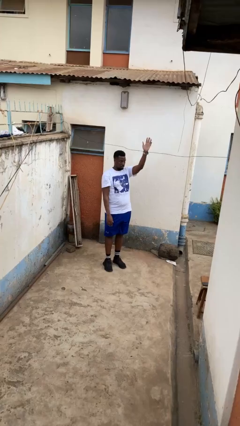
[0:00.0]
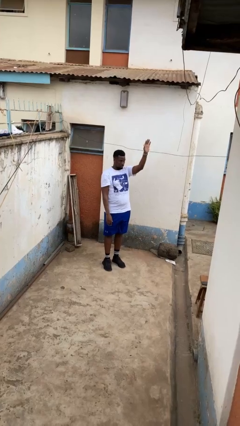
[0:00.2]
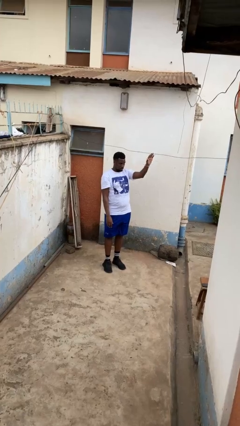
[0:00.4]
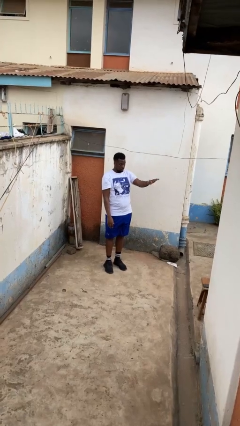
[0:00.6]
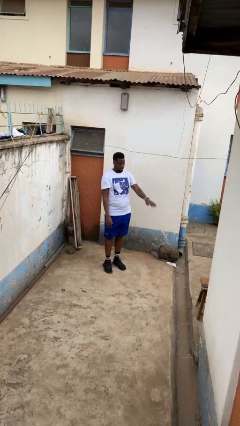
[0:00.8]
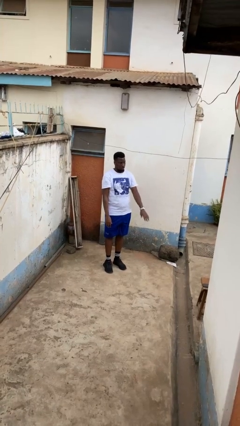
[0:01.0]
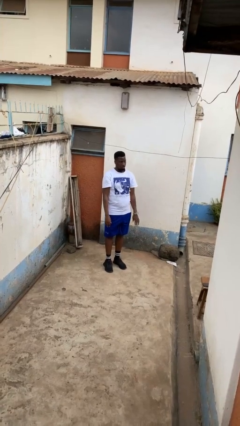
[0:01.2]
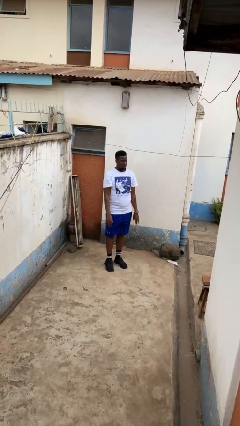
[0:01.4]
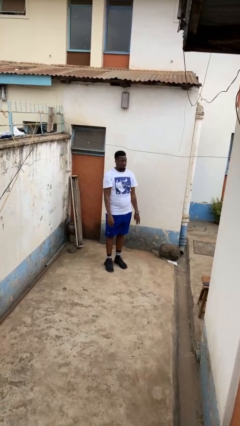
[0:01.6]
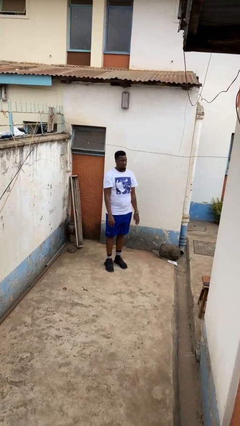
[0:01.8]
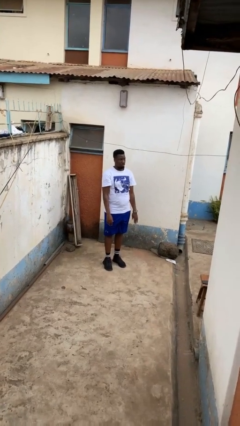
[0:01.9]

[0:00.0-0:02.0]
person gestures swipe down

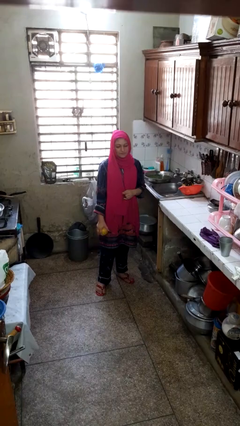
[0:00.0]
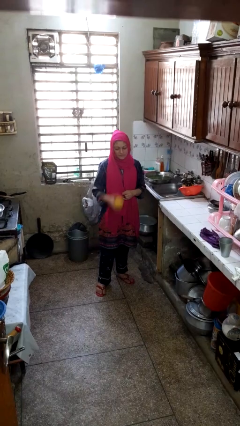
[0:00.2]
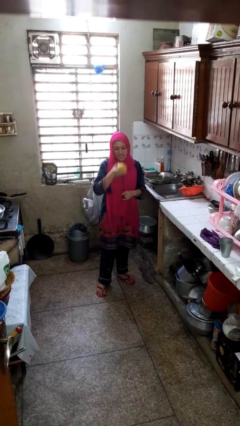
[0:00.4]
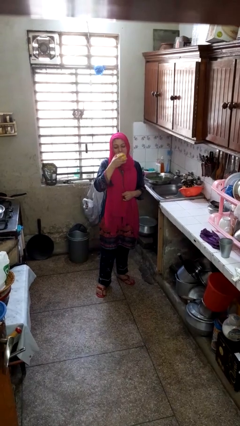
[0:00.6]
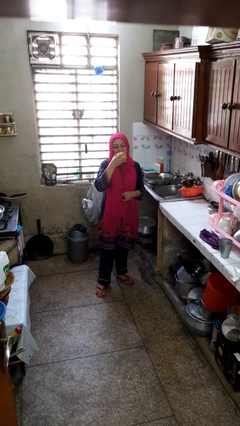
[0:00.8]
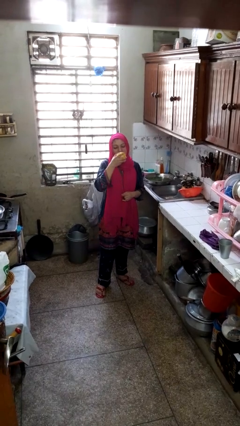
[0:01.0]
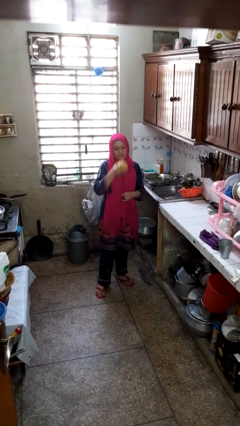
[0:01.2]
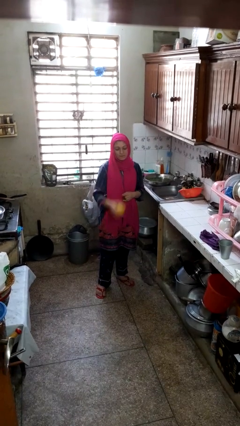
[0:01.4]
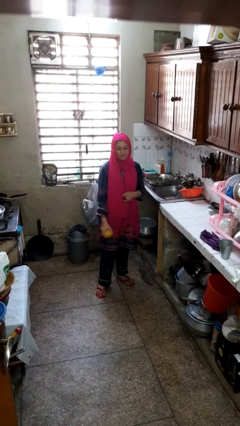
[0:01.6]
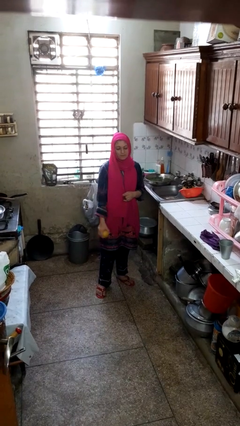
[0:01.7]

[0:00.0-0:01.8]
person eats apple

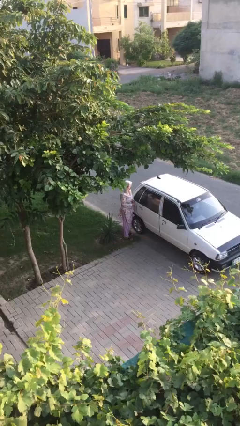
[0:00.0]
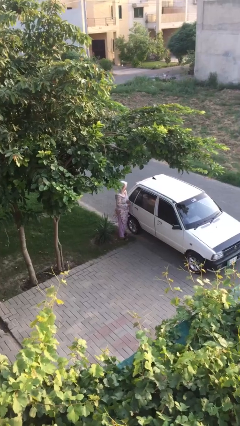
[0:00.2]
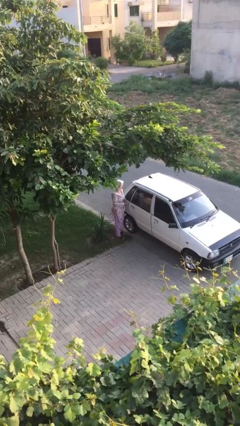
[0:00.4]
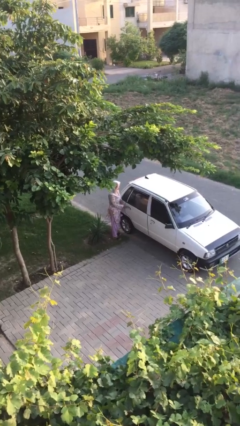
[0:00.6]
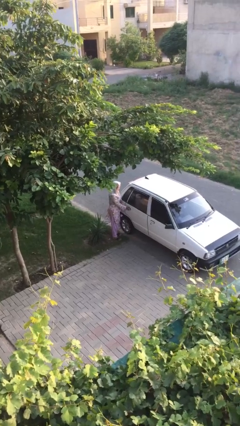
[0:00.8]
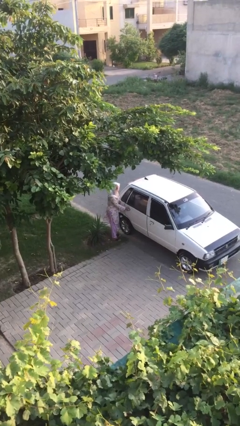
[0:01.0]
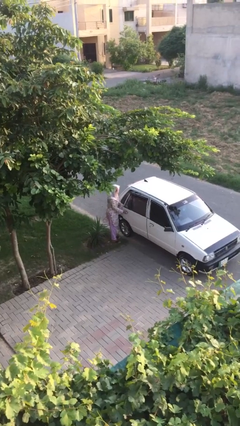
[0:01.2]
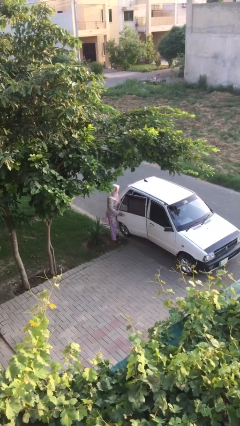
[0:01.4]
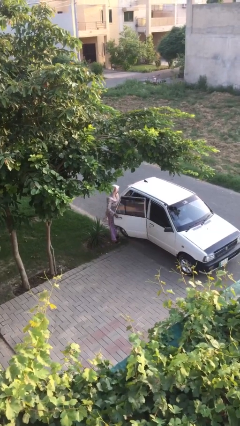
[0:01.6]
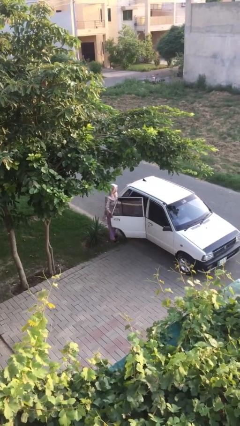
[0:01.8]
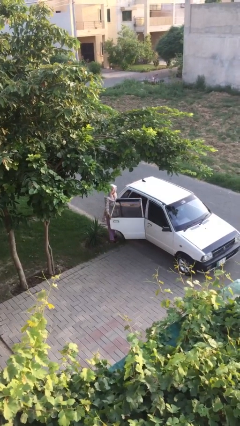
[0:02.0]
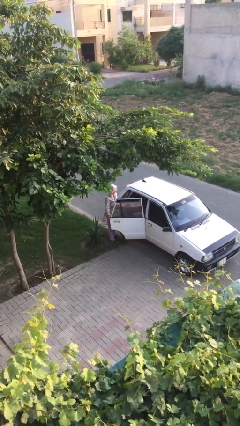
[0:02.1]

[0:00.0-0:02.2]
person opens car door

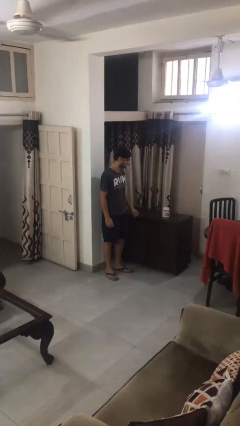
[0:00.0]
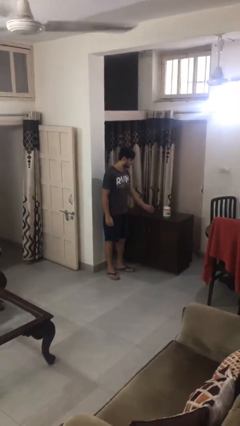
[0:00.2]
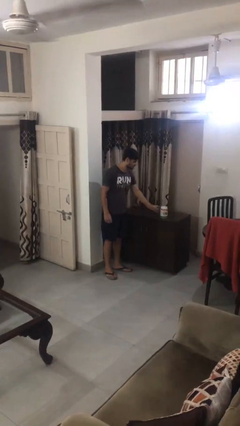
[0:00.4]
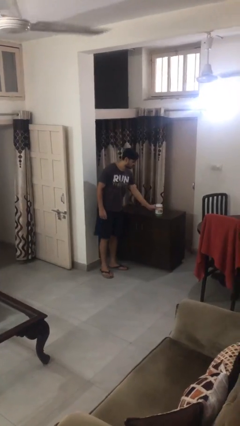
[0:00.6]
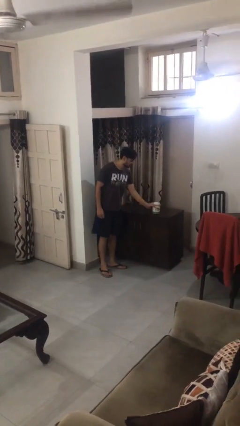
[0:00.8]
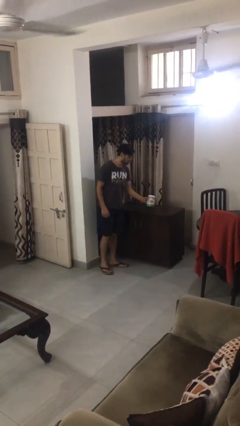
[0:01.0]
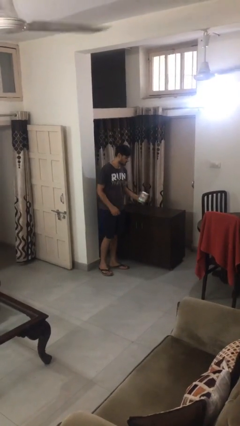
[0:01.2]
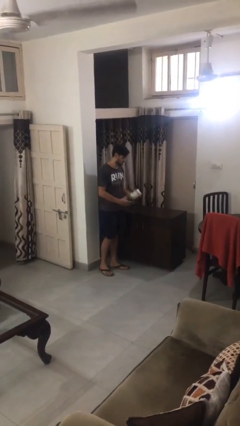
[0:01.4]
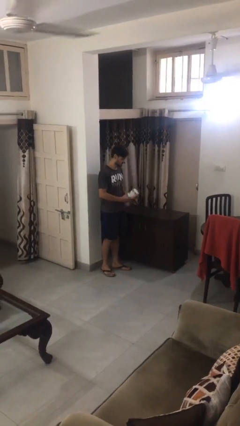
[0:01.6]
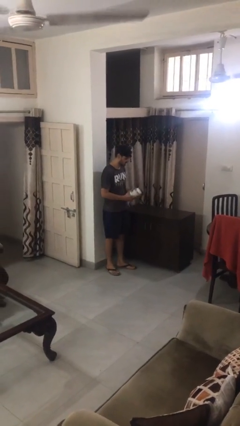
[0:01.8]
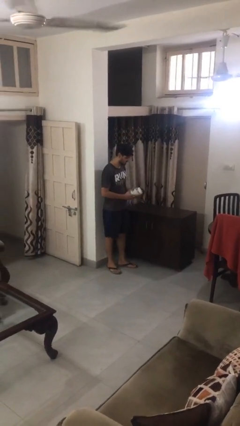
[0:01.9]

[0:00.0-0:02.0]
person picks up object from countertop

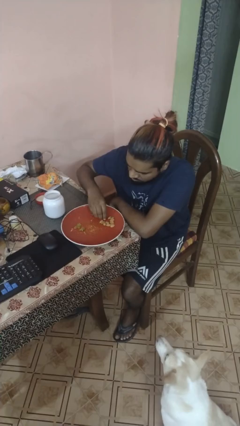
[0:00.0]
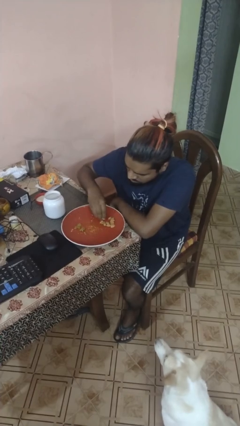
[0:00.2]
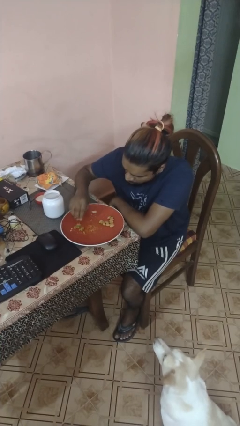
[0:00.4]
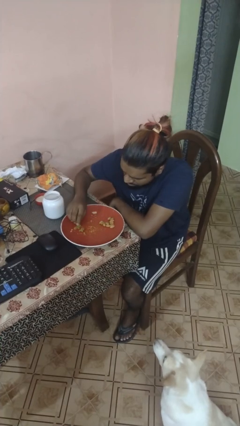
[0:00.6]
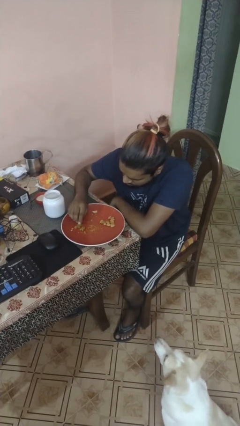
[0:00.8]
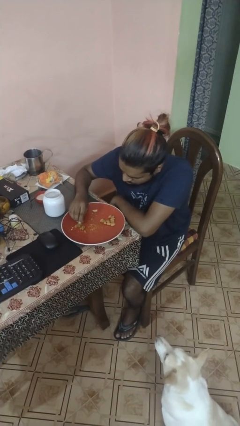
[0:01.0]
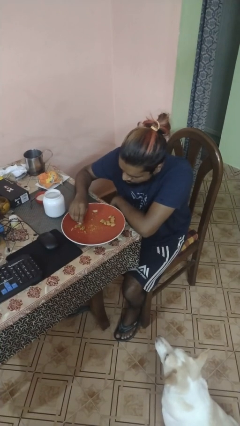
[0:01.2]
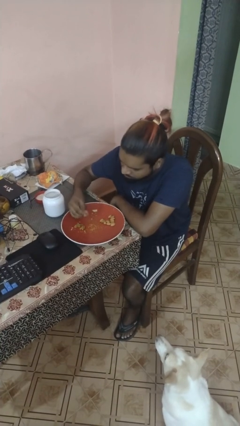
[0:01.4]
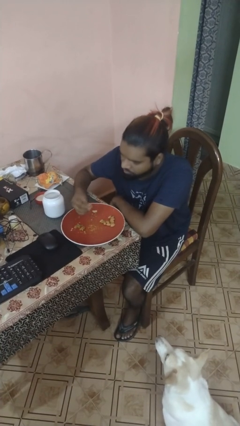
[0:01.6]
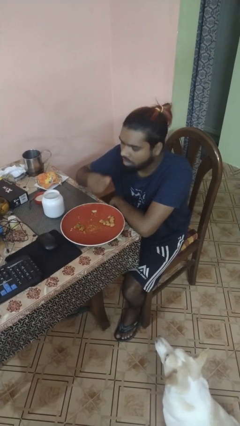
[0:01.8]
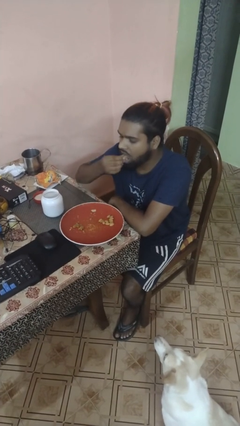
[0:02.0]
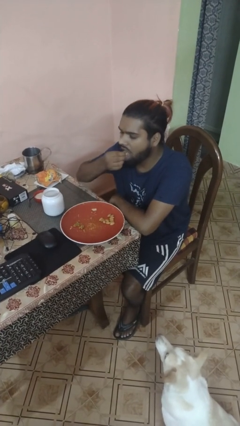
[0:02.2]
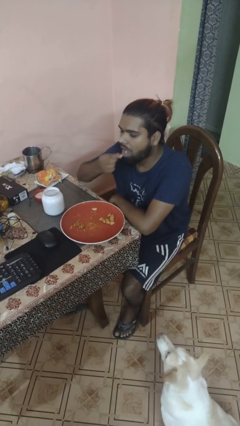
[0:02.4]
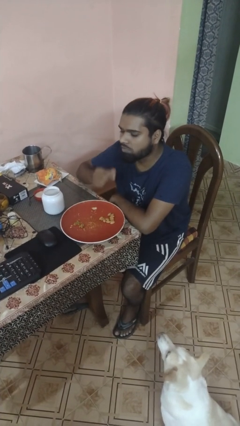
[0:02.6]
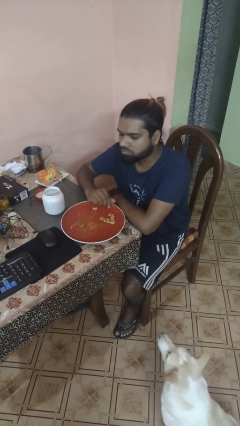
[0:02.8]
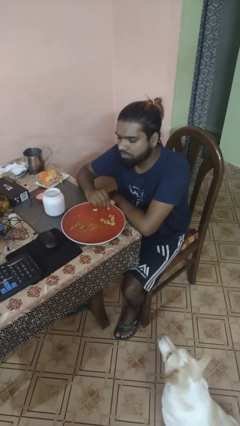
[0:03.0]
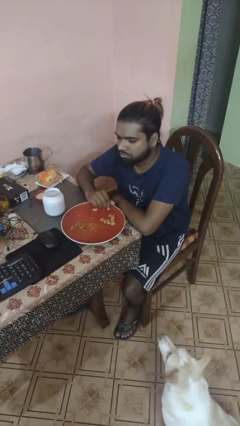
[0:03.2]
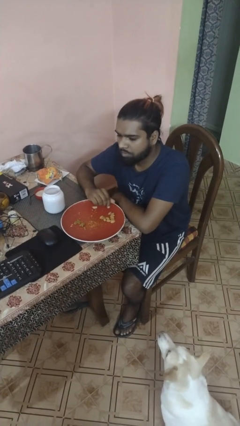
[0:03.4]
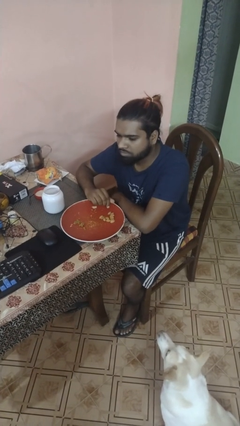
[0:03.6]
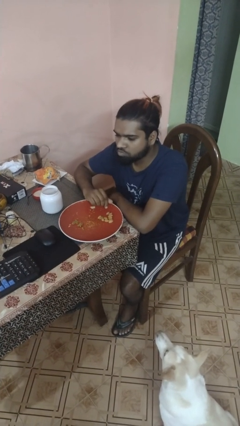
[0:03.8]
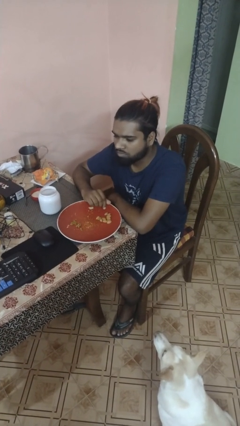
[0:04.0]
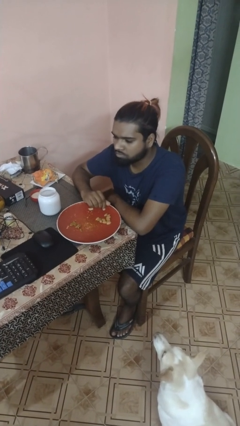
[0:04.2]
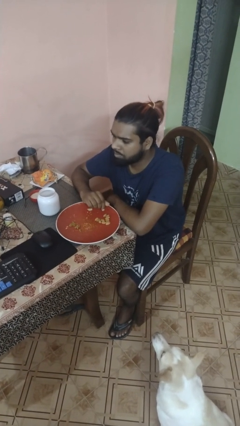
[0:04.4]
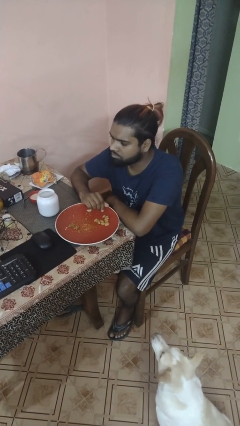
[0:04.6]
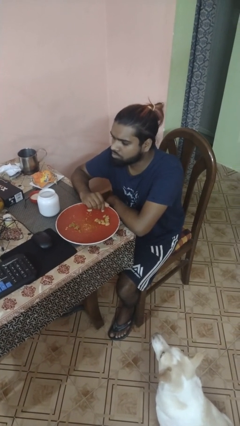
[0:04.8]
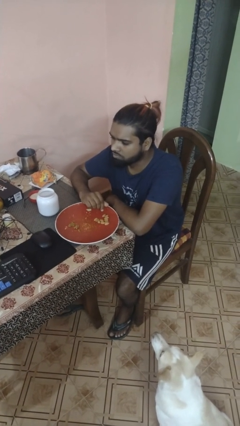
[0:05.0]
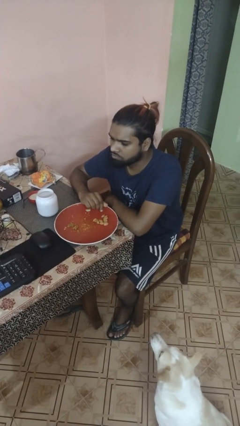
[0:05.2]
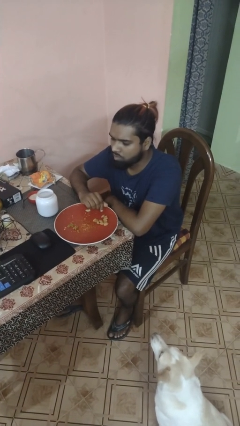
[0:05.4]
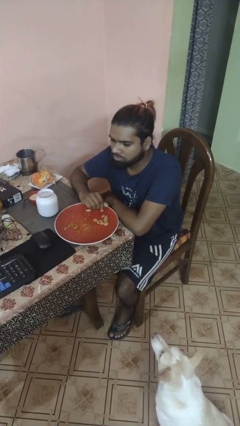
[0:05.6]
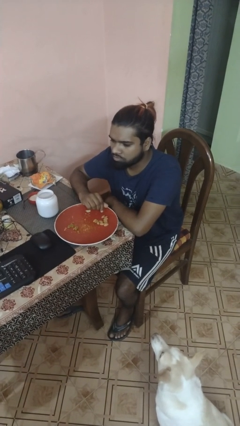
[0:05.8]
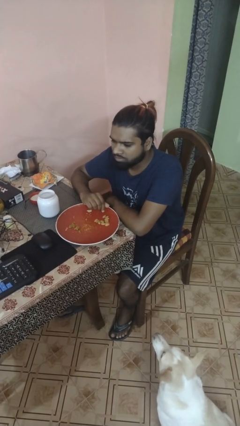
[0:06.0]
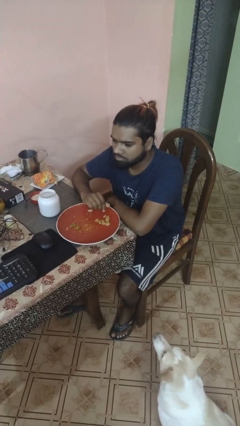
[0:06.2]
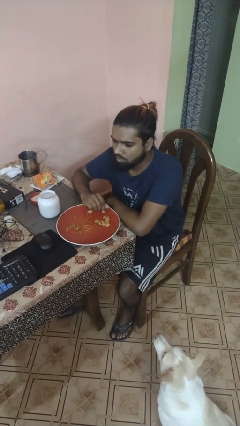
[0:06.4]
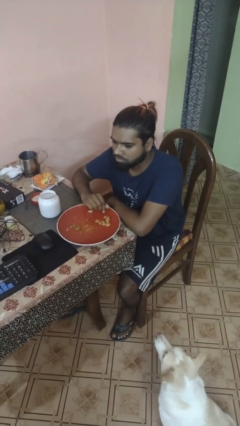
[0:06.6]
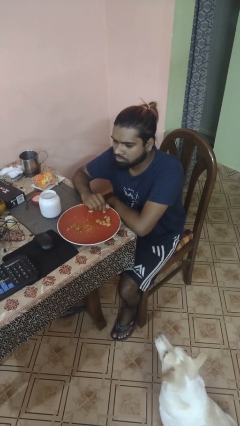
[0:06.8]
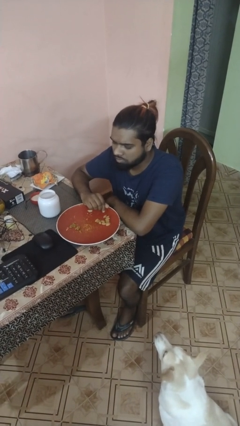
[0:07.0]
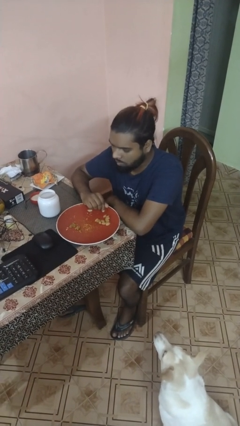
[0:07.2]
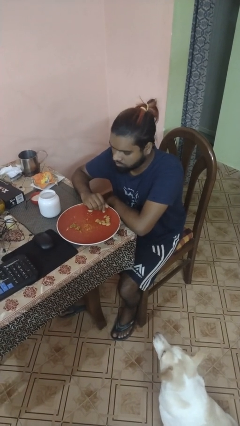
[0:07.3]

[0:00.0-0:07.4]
person eats with hands

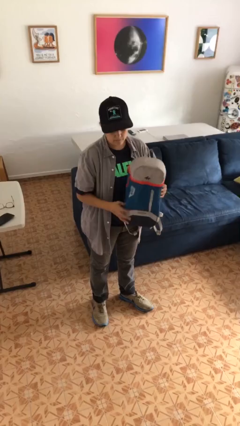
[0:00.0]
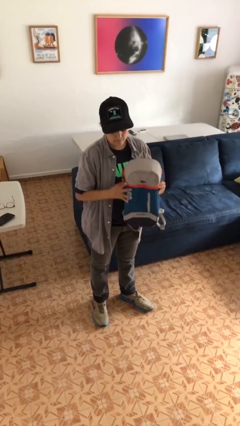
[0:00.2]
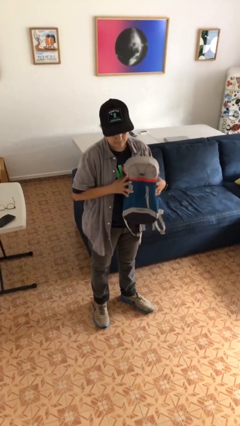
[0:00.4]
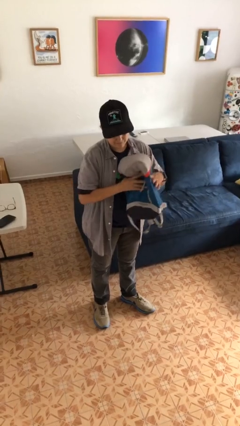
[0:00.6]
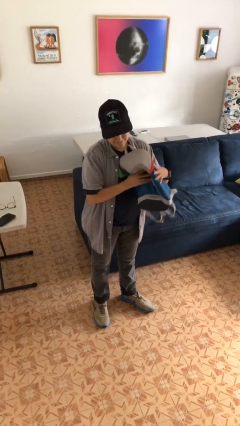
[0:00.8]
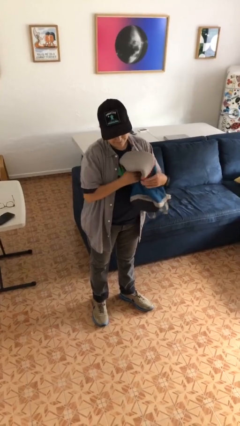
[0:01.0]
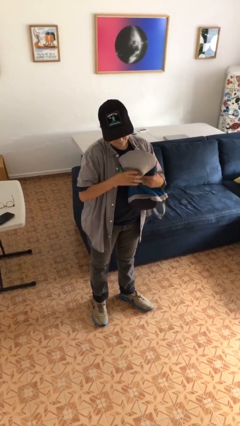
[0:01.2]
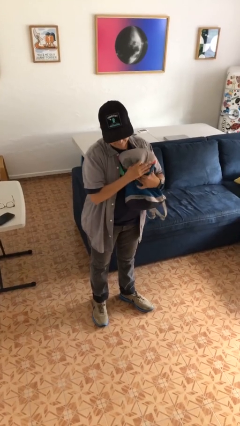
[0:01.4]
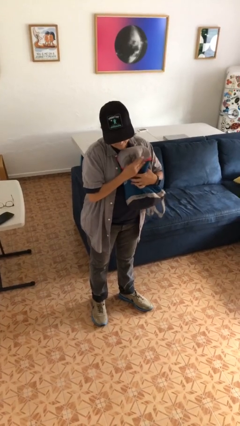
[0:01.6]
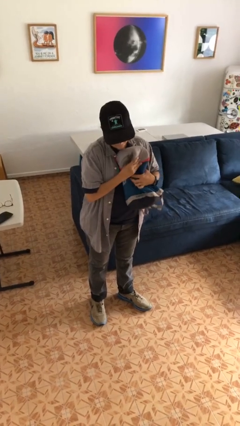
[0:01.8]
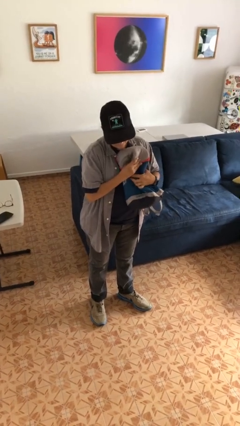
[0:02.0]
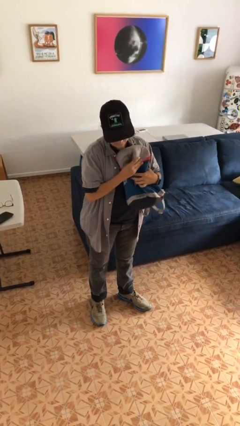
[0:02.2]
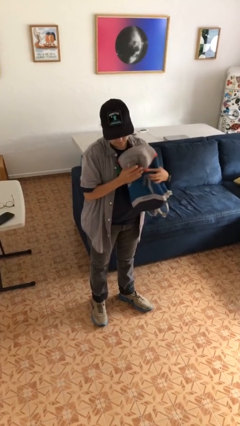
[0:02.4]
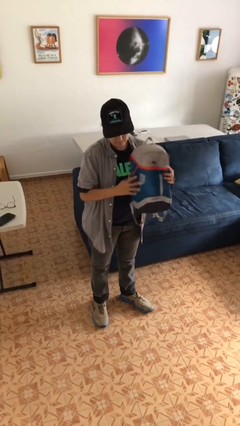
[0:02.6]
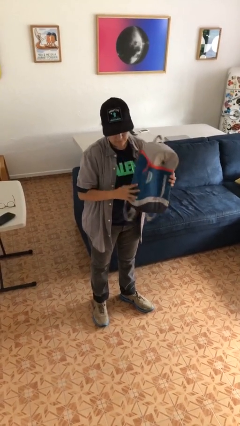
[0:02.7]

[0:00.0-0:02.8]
person squeezes object
